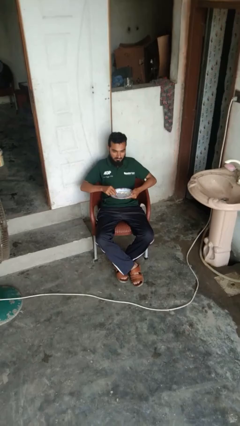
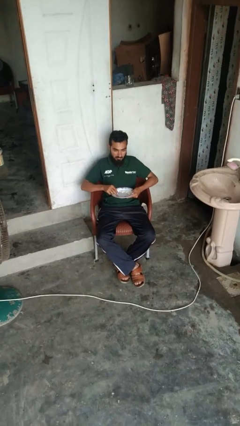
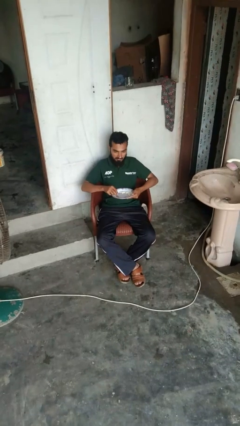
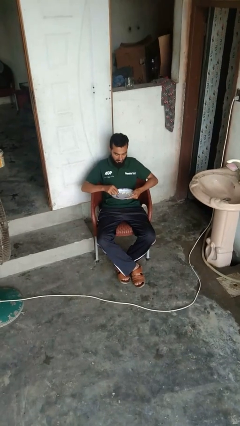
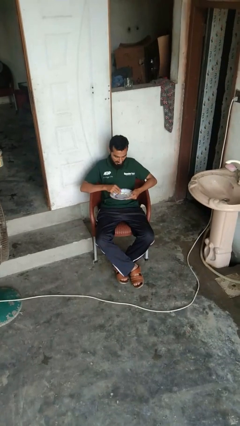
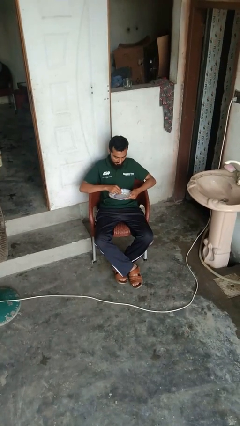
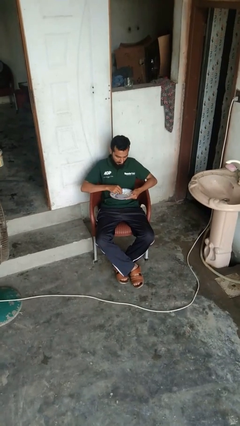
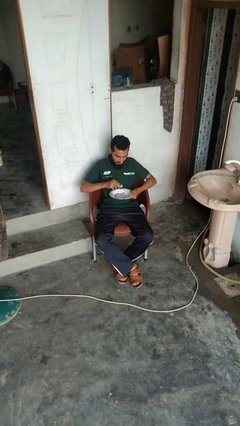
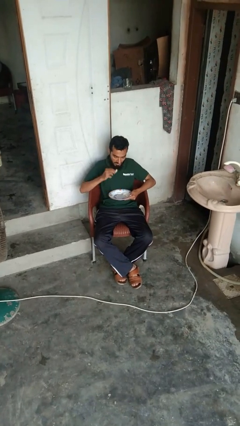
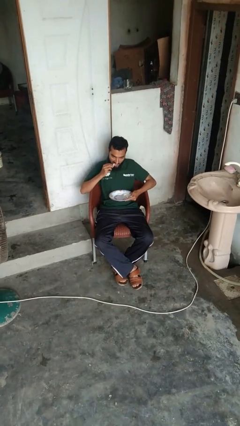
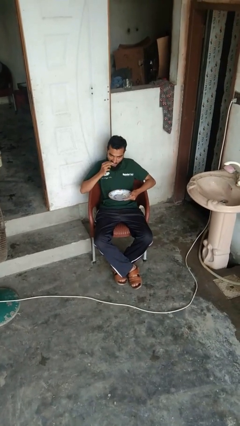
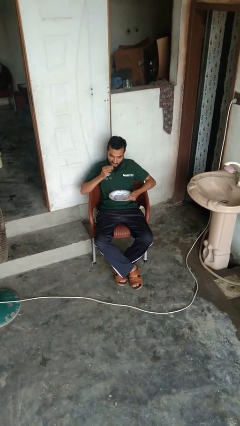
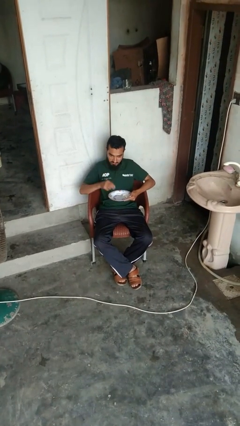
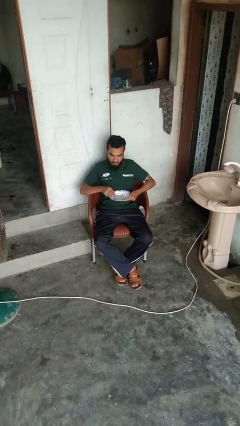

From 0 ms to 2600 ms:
person eats with hands

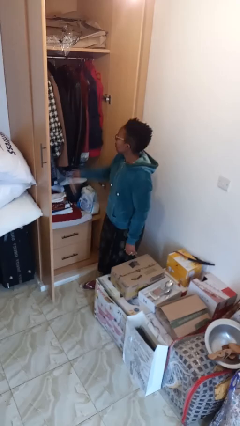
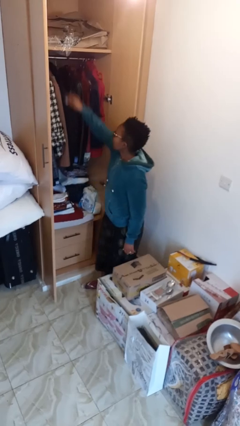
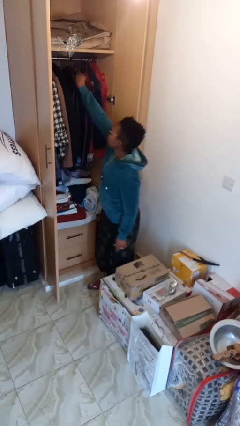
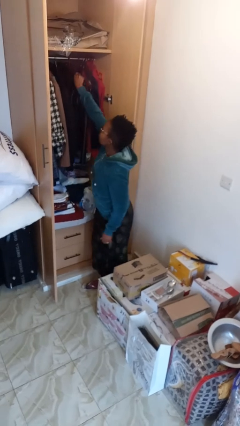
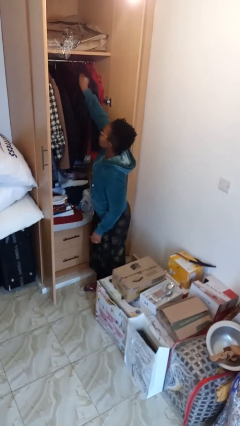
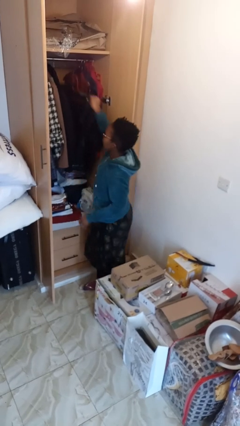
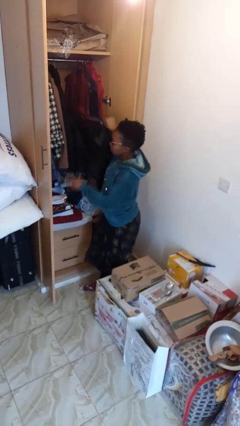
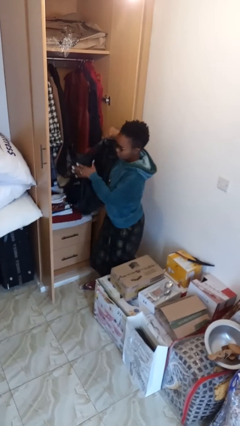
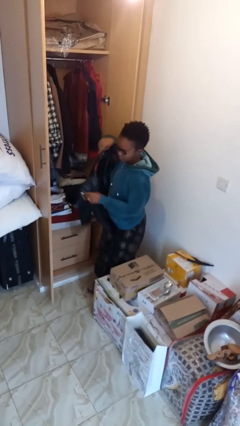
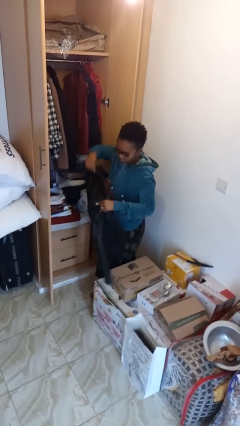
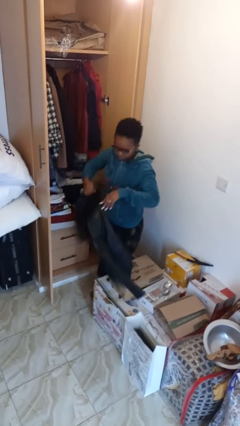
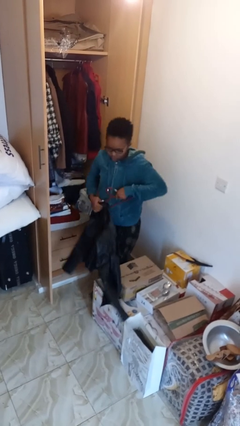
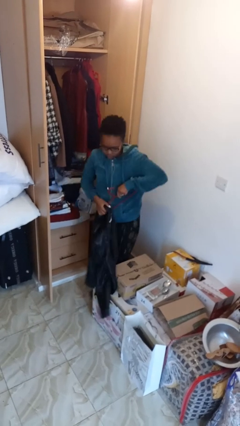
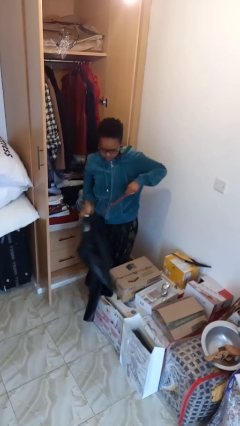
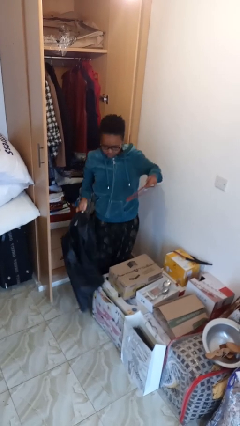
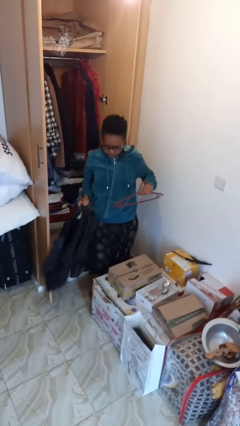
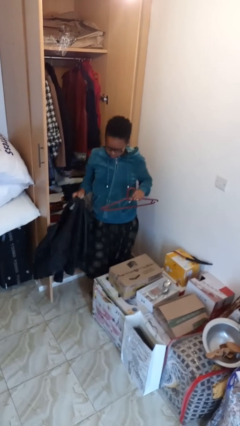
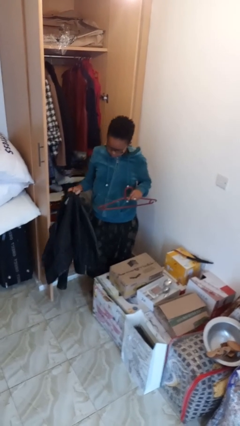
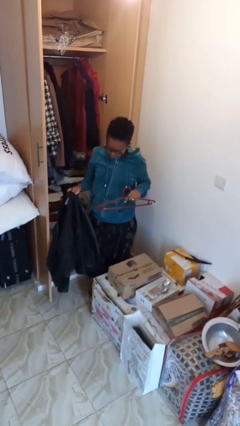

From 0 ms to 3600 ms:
person takes clothes from closet

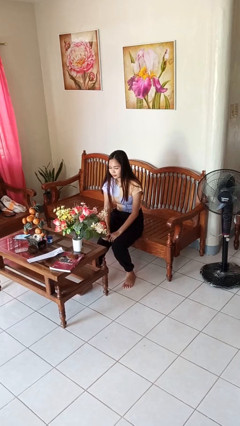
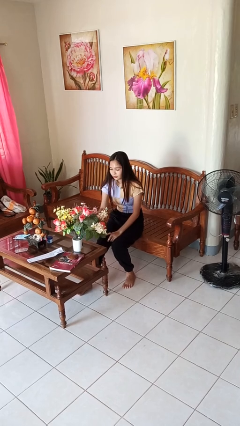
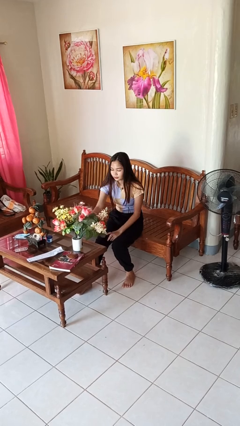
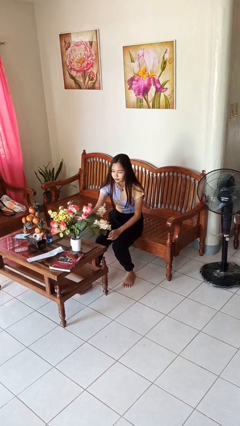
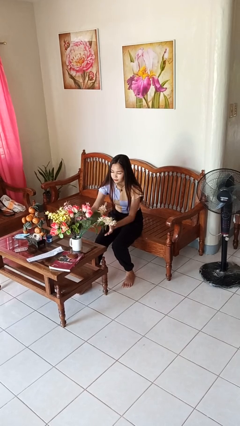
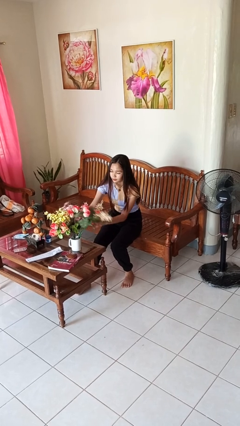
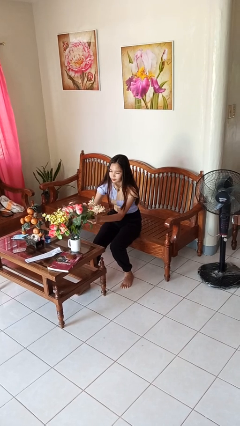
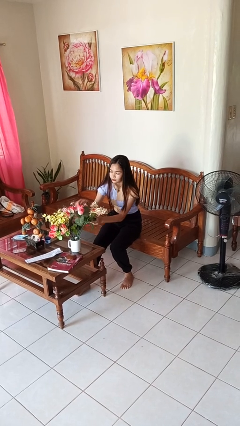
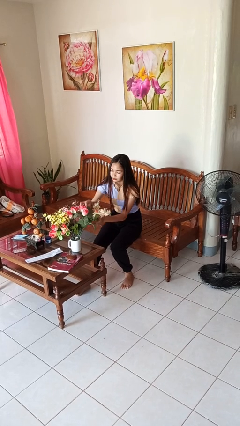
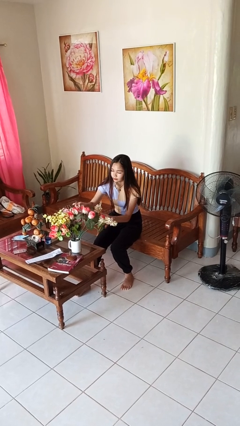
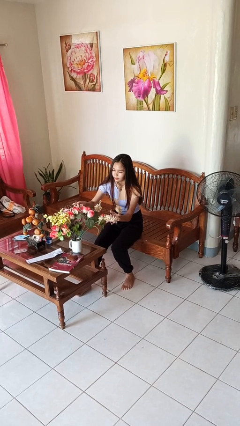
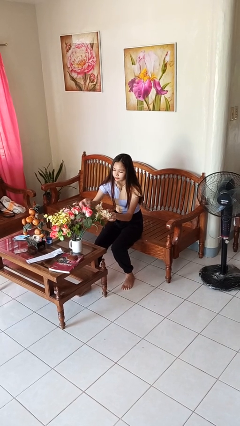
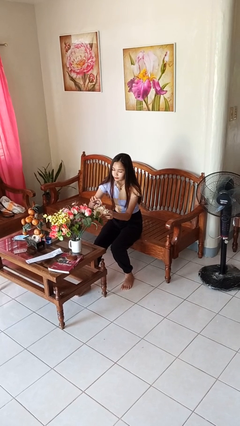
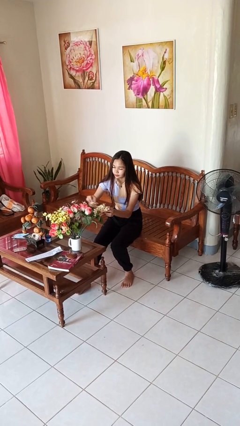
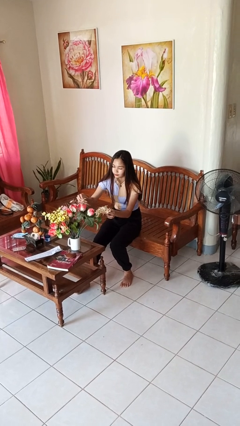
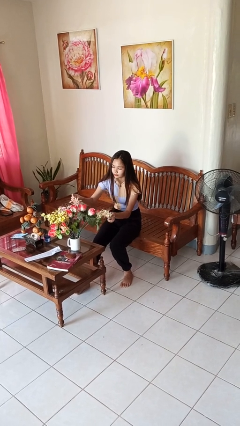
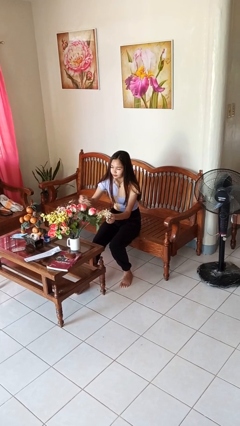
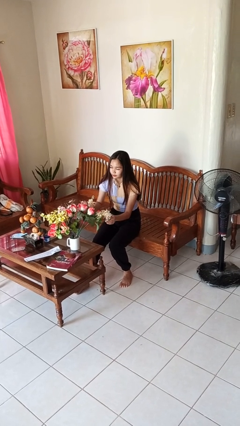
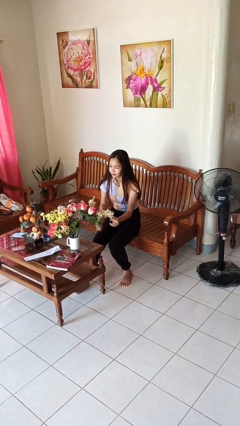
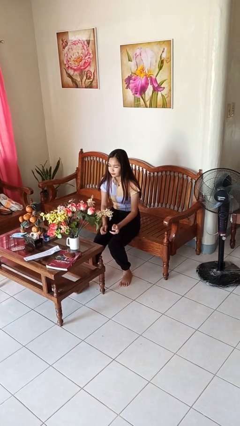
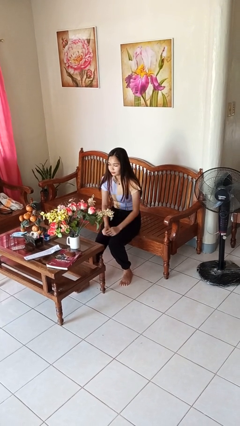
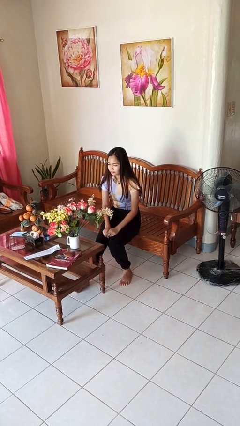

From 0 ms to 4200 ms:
person arranges flowers in vase

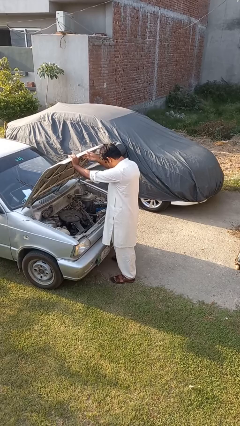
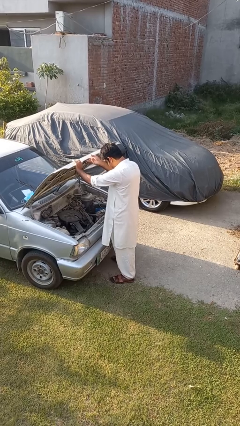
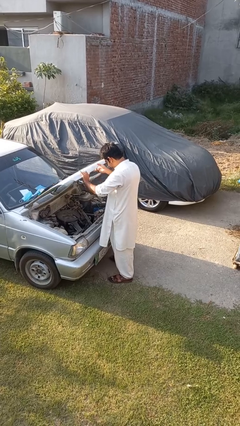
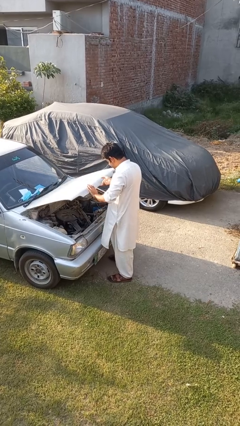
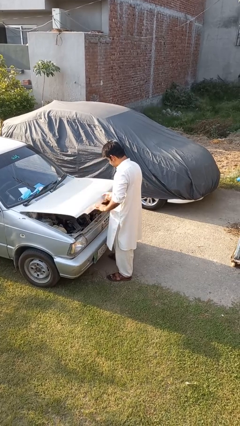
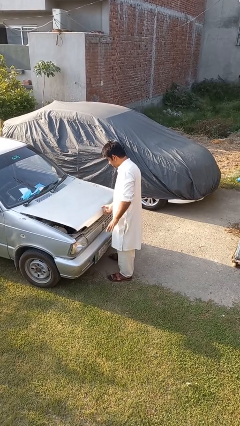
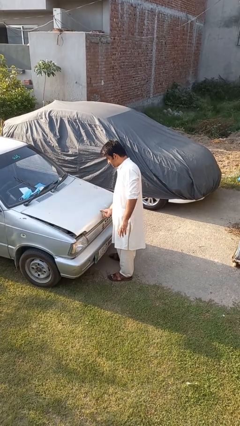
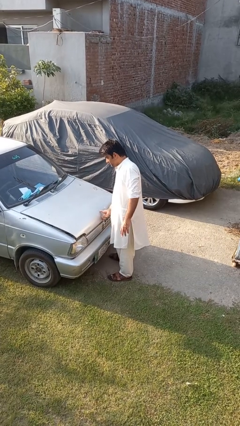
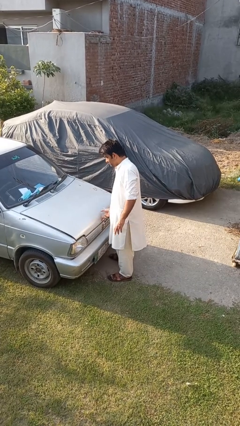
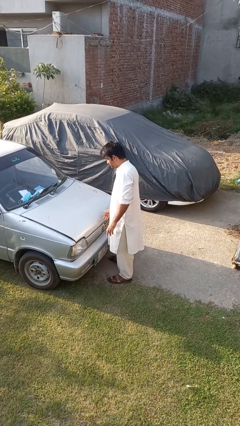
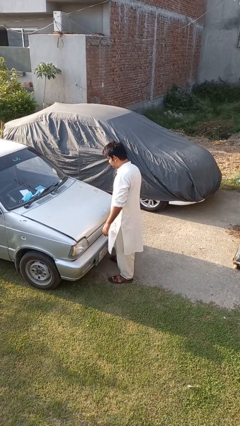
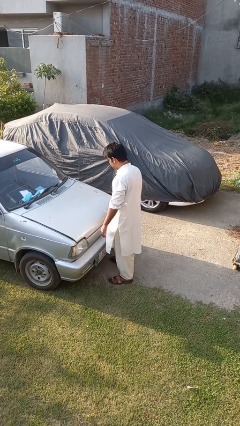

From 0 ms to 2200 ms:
person closes car hood

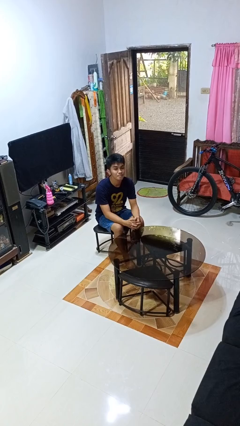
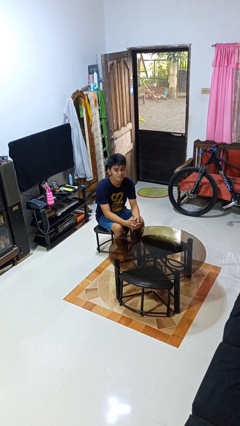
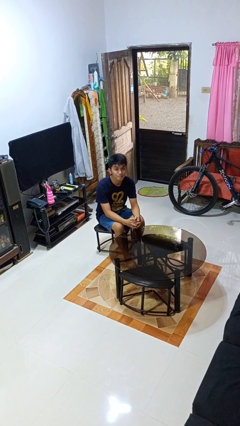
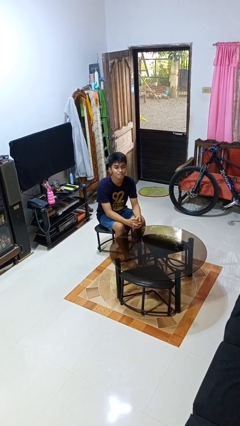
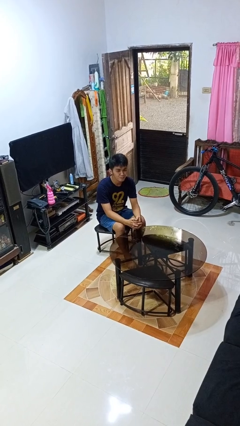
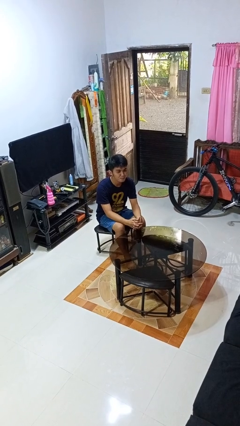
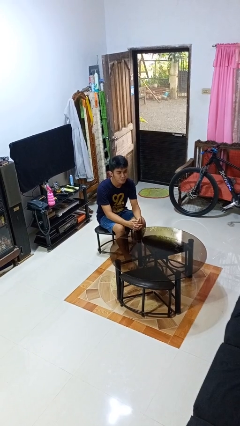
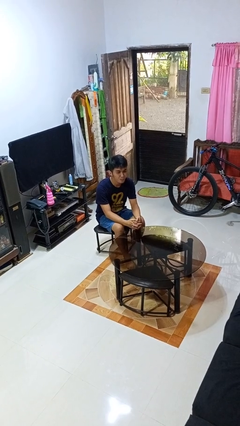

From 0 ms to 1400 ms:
person nods head

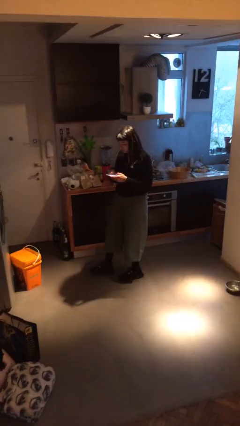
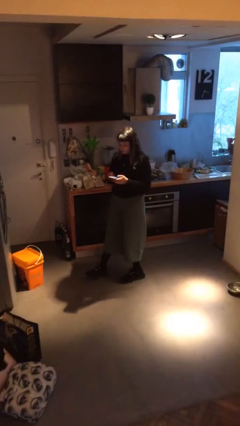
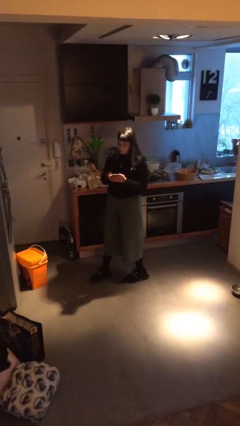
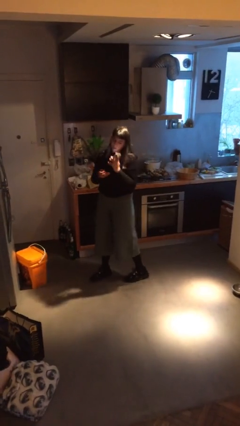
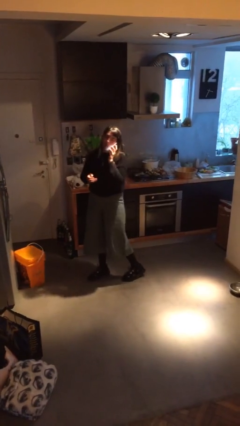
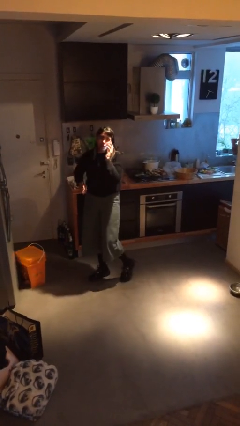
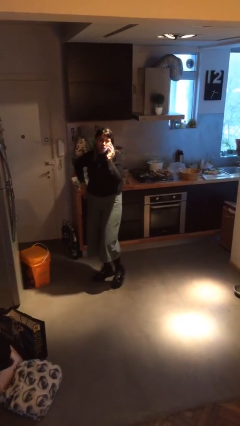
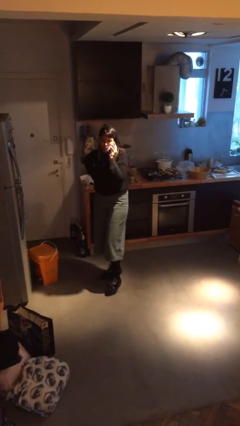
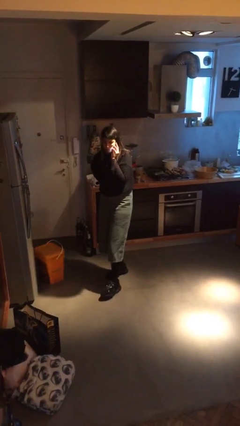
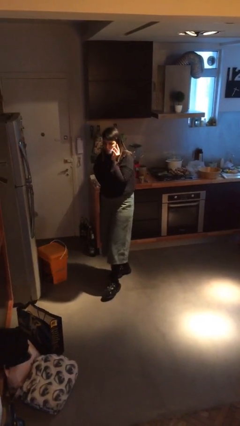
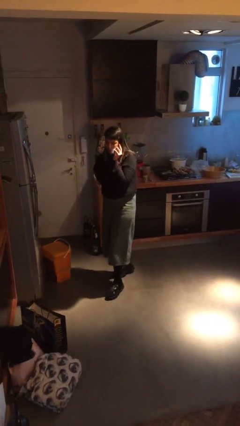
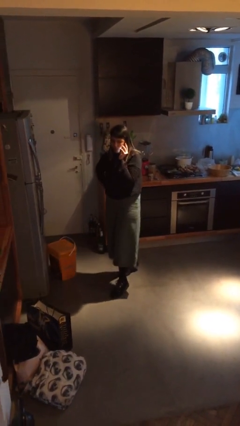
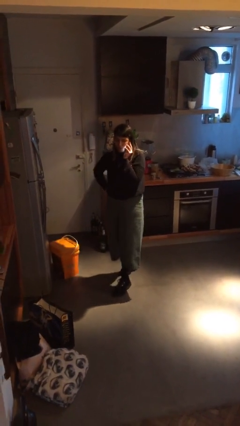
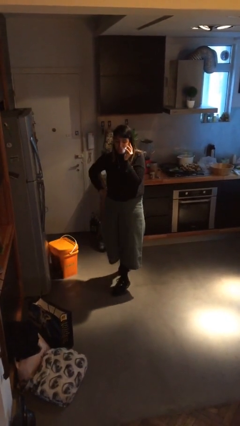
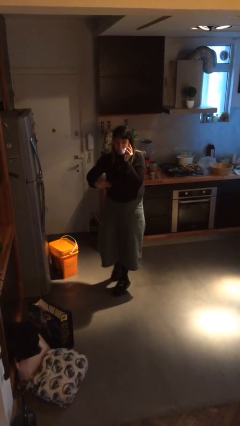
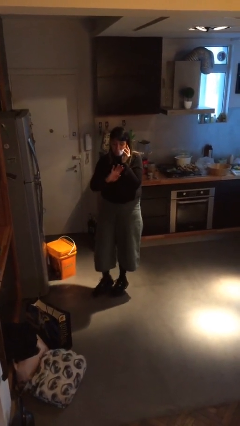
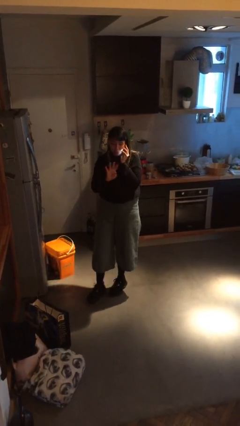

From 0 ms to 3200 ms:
person talks on phone
